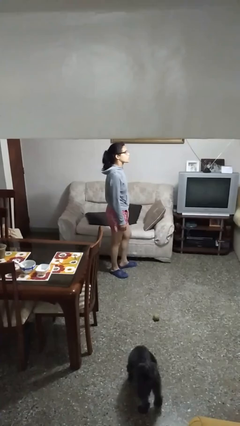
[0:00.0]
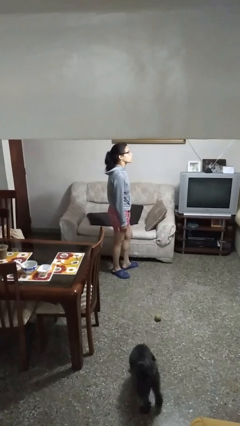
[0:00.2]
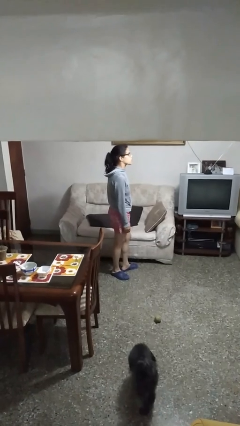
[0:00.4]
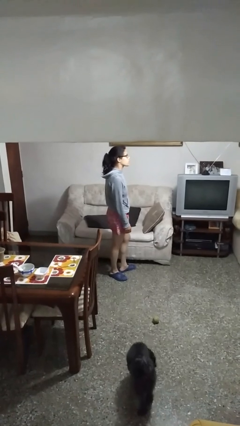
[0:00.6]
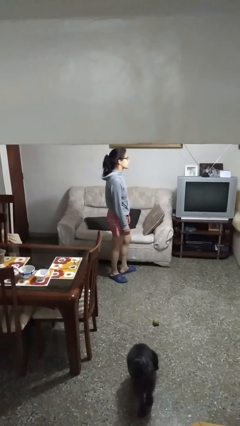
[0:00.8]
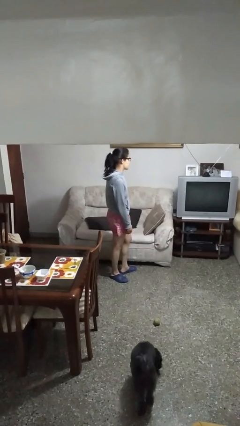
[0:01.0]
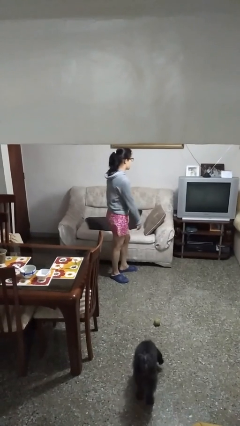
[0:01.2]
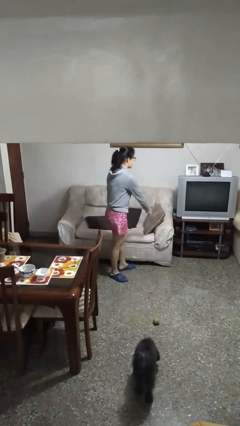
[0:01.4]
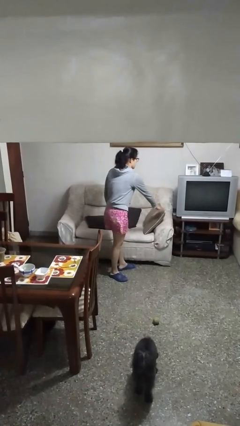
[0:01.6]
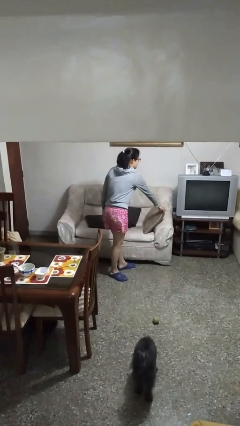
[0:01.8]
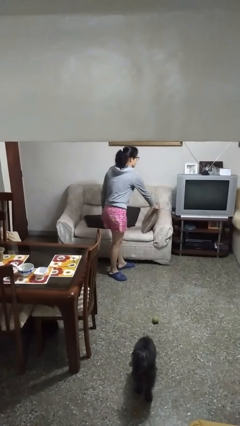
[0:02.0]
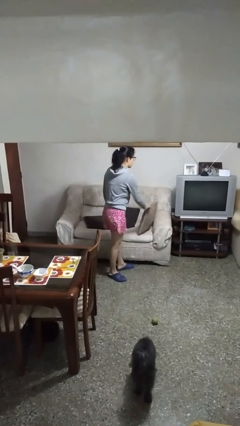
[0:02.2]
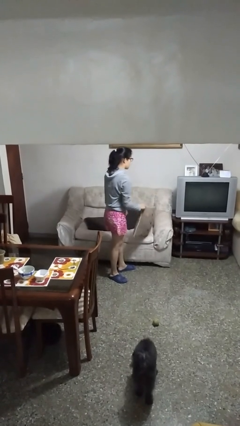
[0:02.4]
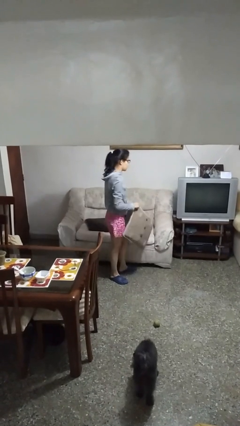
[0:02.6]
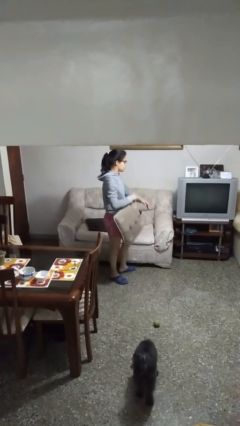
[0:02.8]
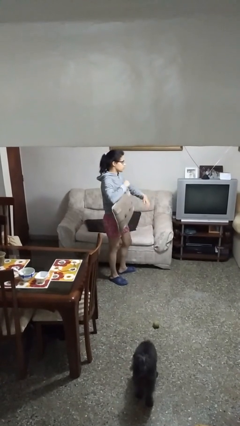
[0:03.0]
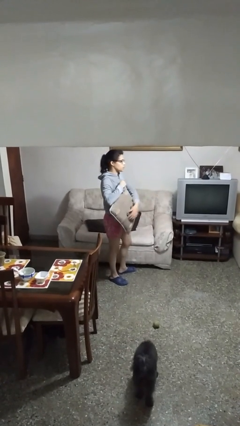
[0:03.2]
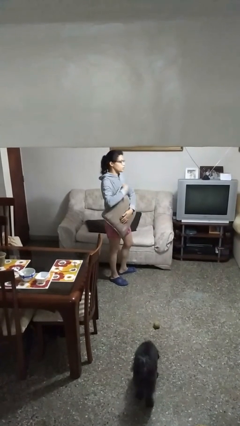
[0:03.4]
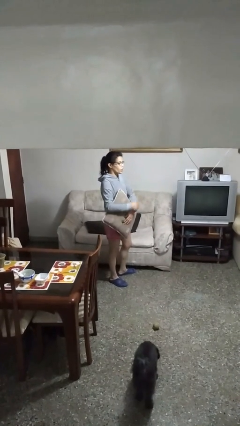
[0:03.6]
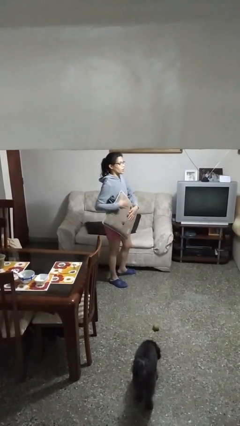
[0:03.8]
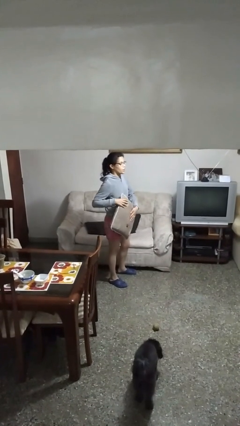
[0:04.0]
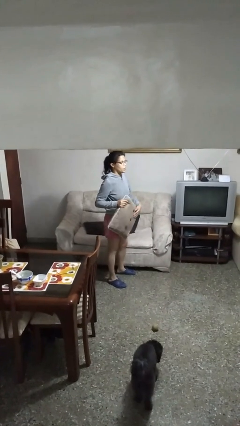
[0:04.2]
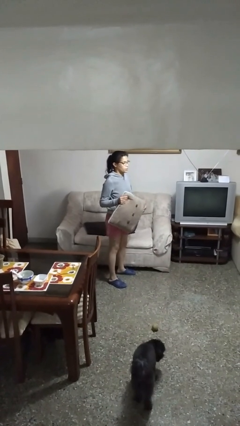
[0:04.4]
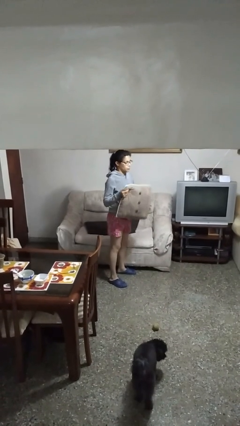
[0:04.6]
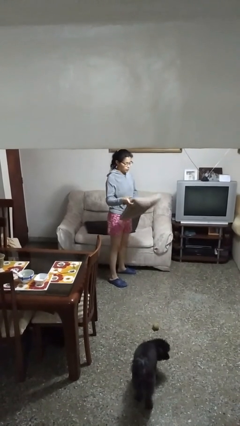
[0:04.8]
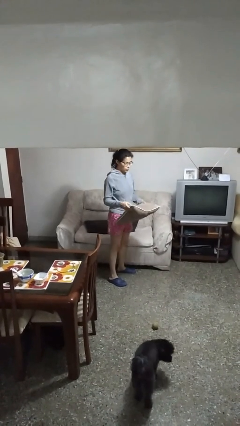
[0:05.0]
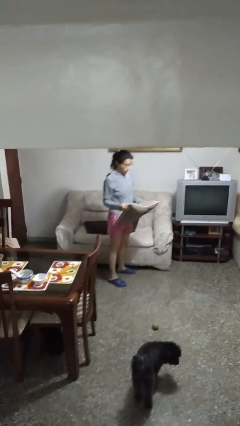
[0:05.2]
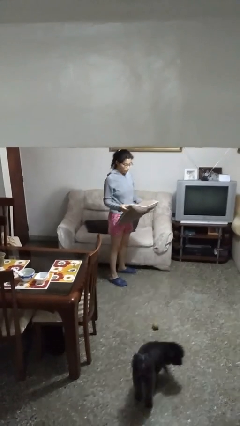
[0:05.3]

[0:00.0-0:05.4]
person picks up object from couch

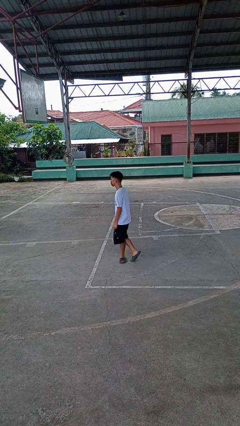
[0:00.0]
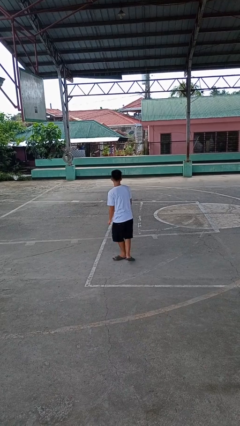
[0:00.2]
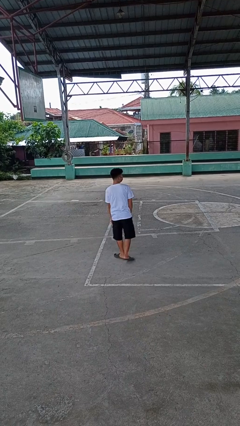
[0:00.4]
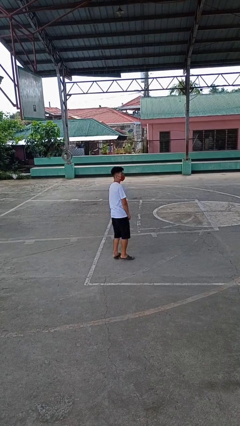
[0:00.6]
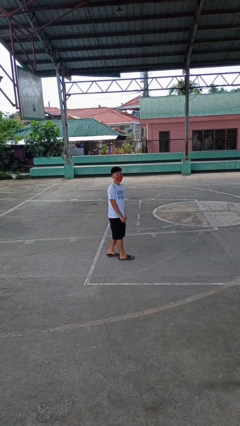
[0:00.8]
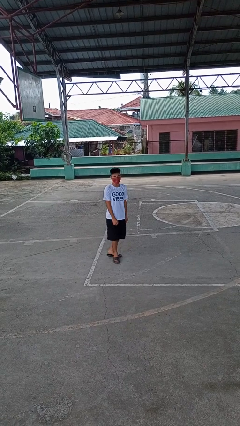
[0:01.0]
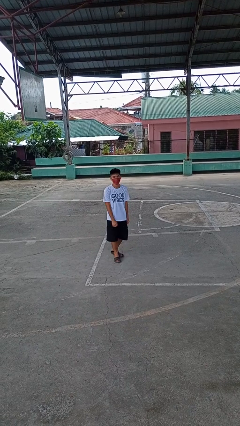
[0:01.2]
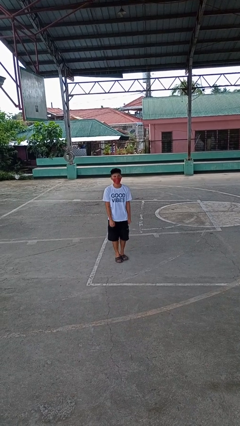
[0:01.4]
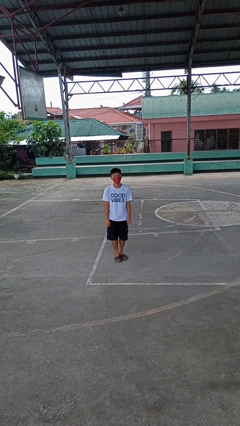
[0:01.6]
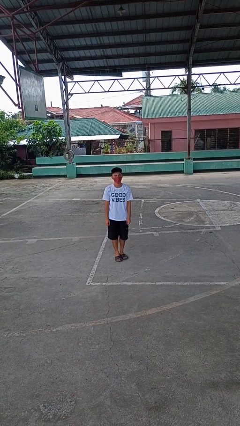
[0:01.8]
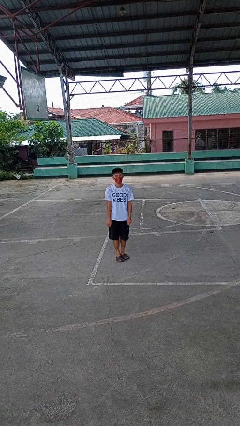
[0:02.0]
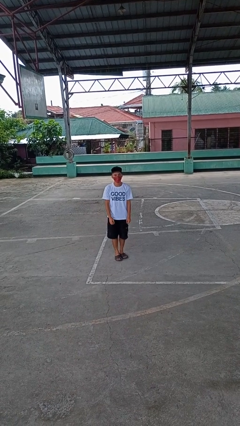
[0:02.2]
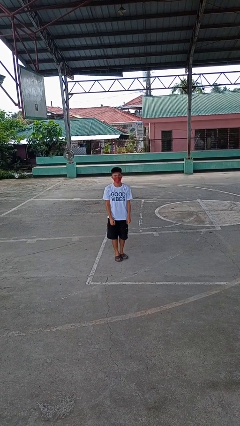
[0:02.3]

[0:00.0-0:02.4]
person twirls

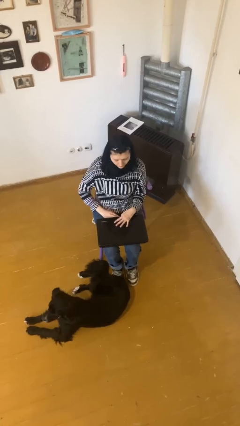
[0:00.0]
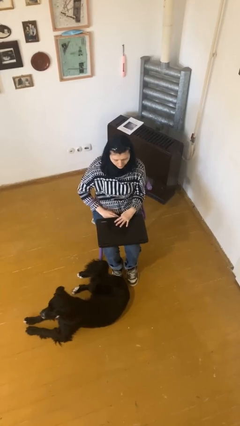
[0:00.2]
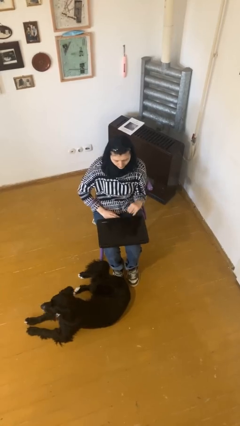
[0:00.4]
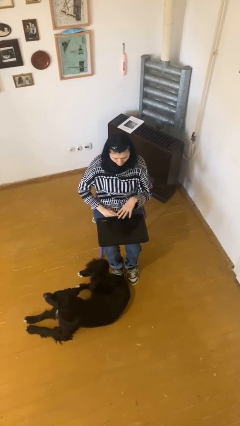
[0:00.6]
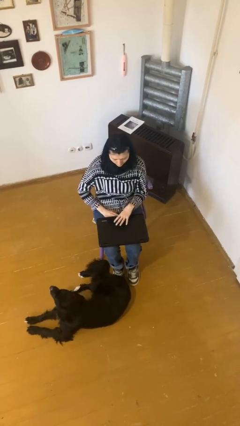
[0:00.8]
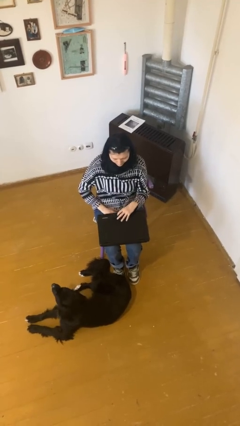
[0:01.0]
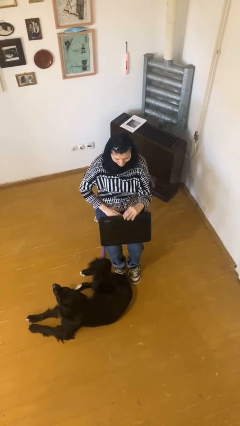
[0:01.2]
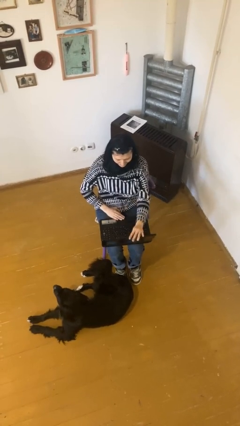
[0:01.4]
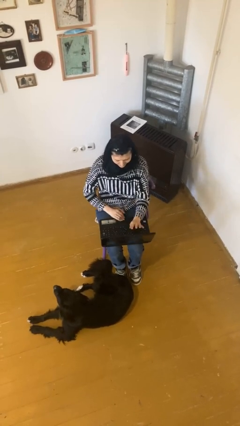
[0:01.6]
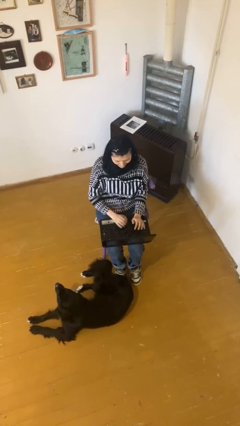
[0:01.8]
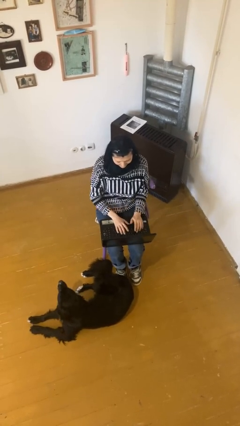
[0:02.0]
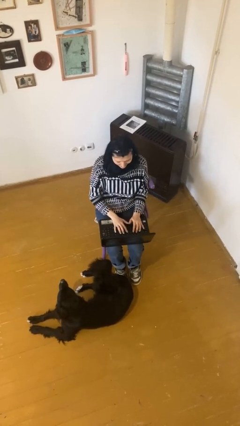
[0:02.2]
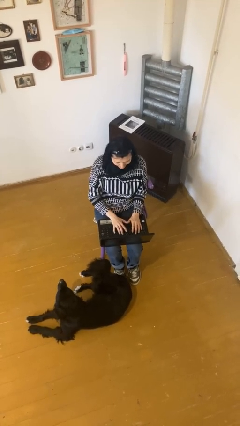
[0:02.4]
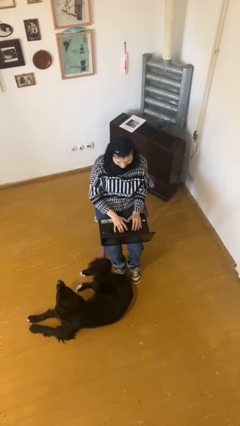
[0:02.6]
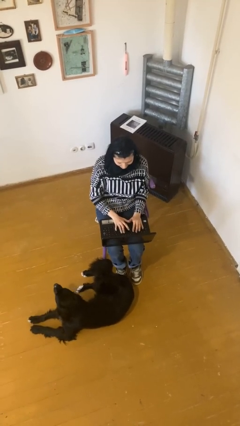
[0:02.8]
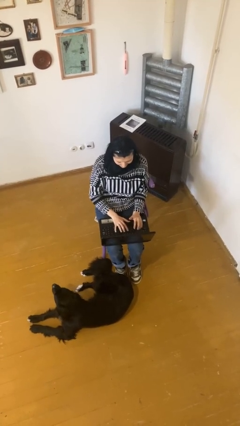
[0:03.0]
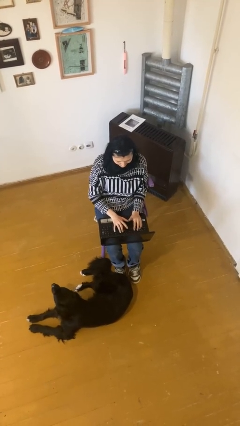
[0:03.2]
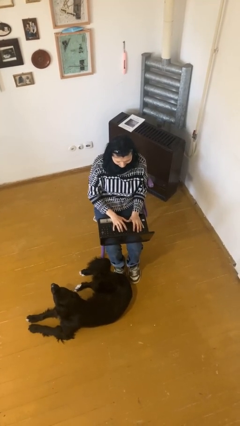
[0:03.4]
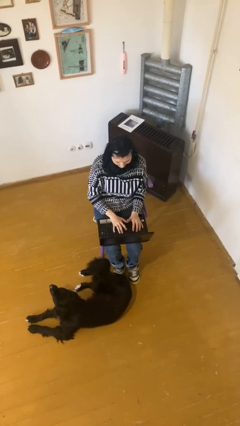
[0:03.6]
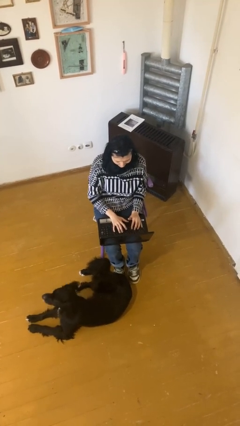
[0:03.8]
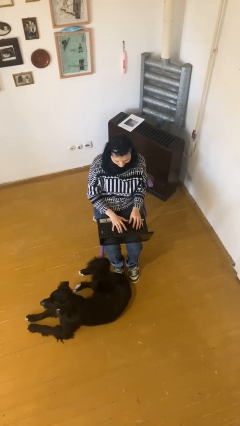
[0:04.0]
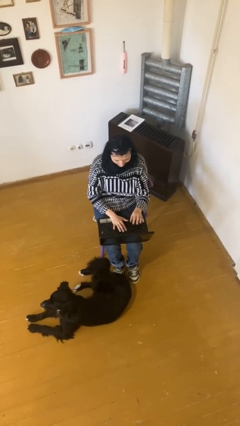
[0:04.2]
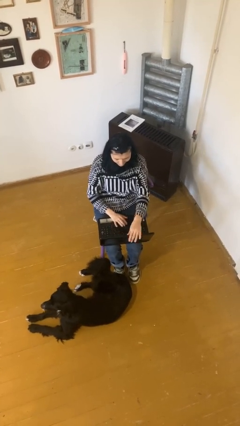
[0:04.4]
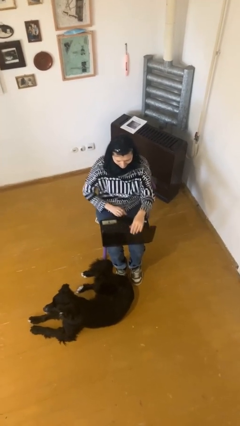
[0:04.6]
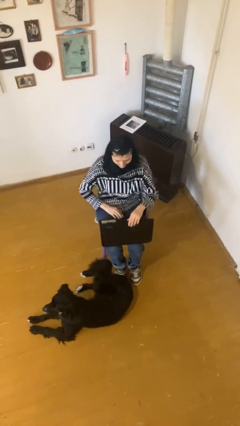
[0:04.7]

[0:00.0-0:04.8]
person interacts with laptop

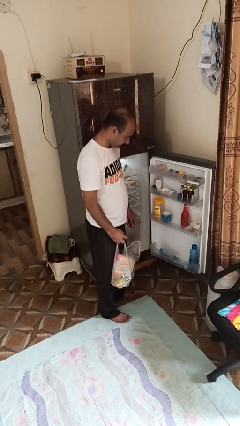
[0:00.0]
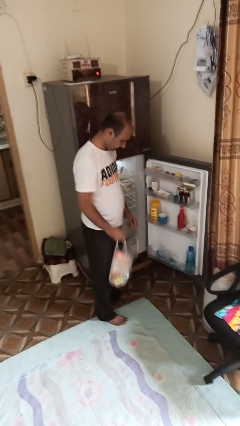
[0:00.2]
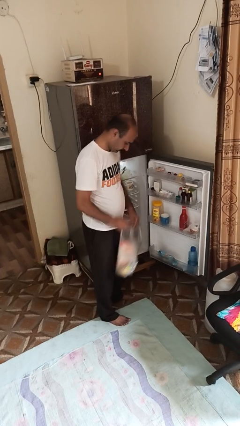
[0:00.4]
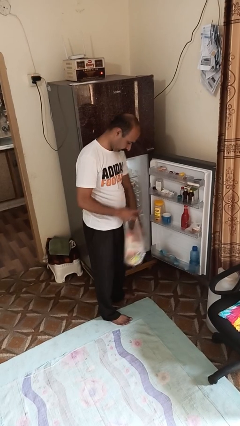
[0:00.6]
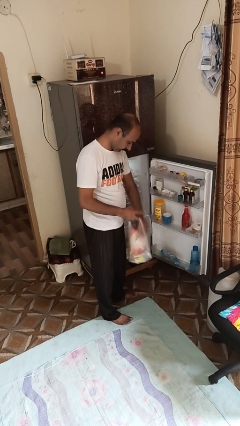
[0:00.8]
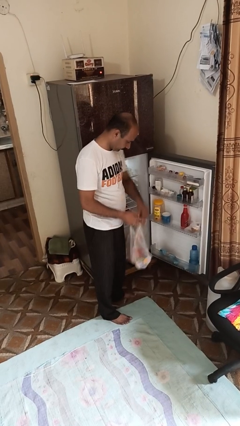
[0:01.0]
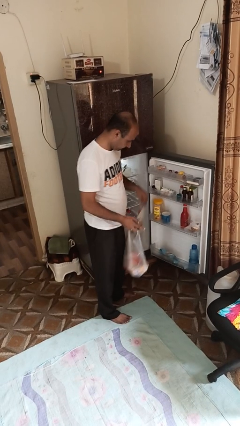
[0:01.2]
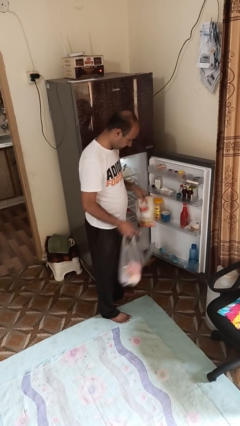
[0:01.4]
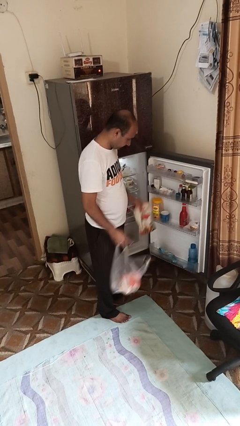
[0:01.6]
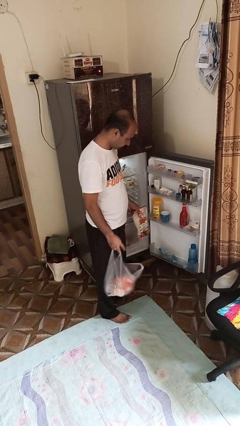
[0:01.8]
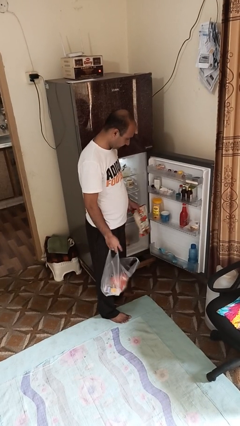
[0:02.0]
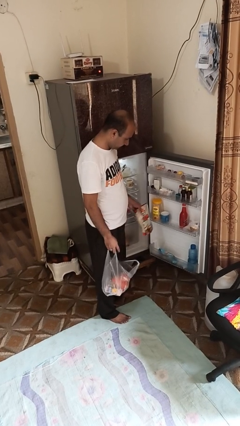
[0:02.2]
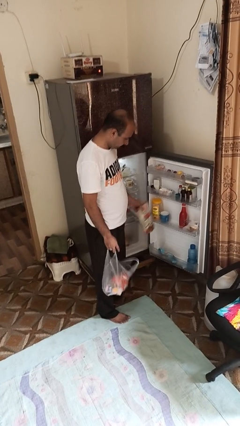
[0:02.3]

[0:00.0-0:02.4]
person loads groceries into refrigerator

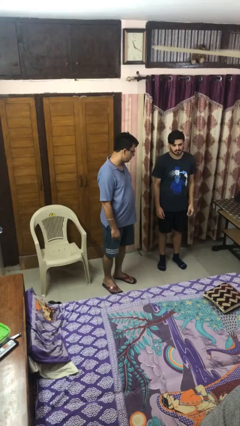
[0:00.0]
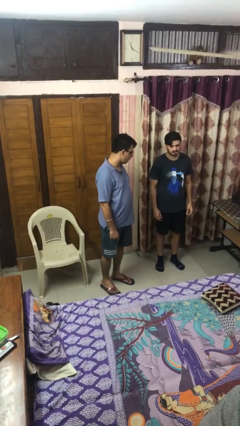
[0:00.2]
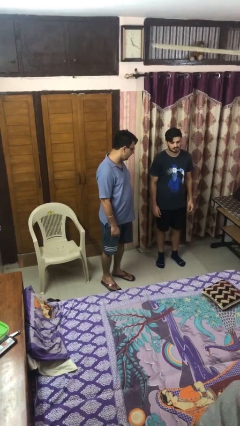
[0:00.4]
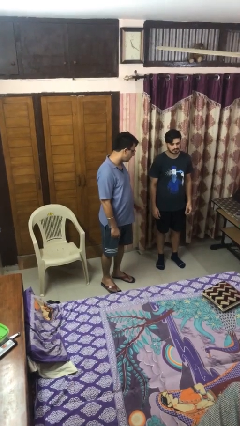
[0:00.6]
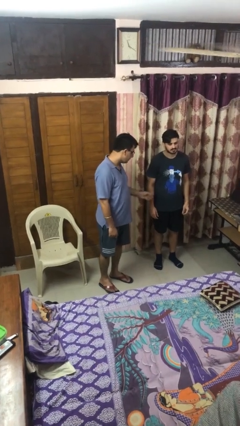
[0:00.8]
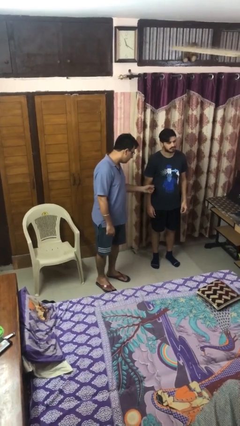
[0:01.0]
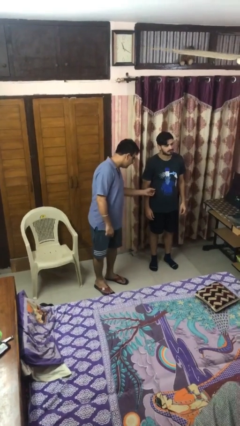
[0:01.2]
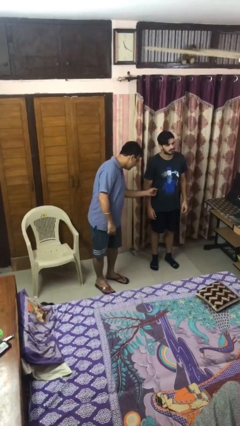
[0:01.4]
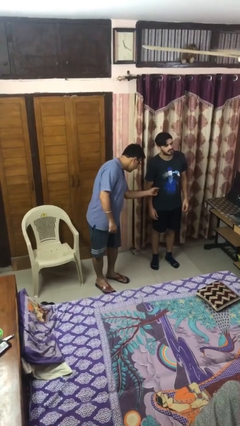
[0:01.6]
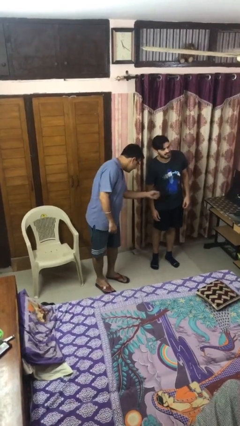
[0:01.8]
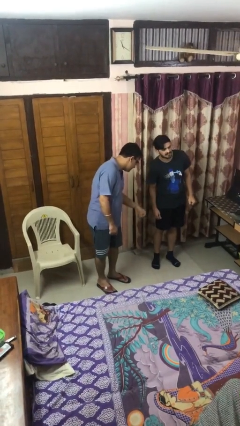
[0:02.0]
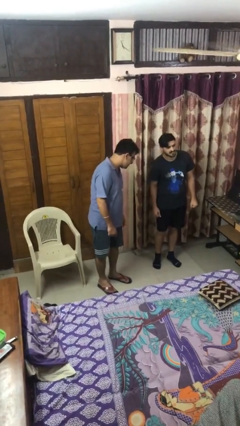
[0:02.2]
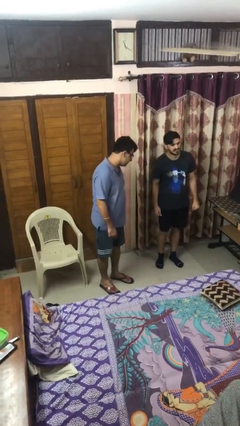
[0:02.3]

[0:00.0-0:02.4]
person tickles person
